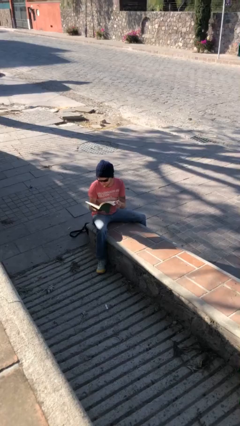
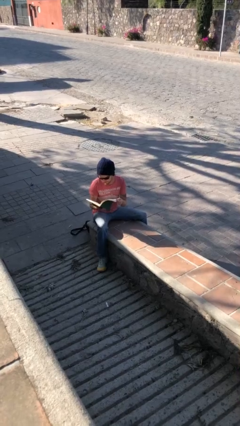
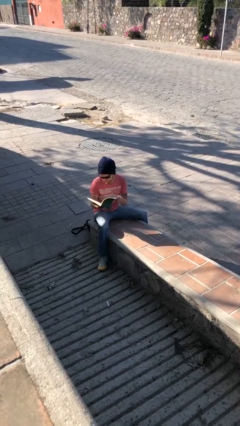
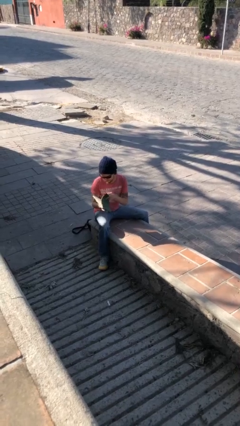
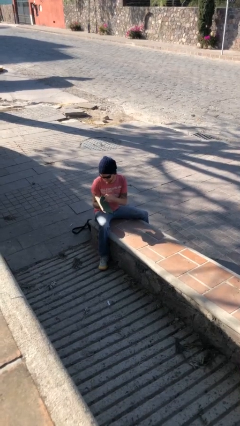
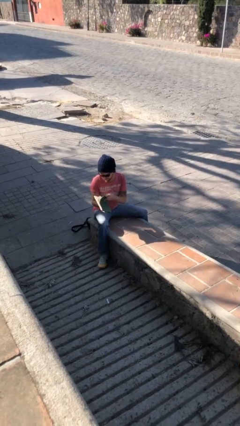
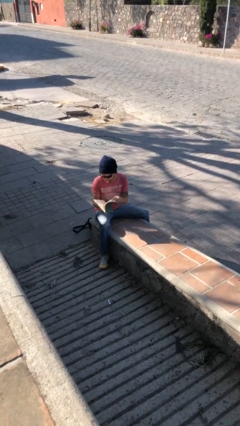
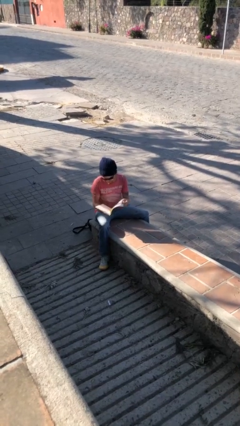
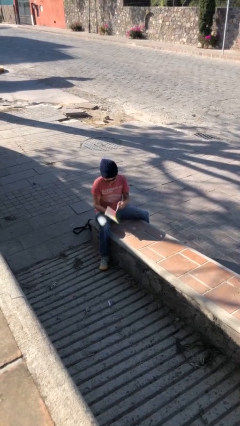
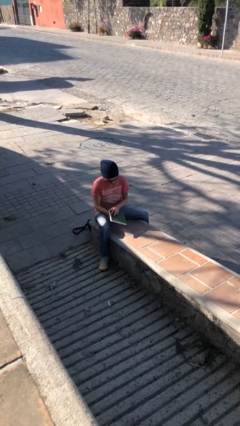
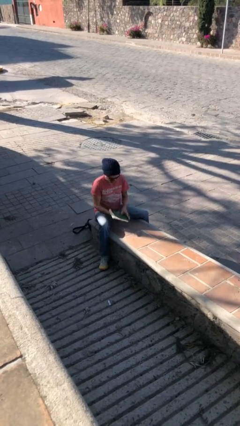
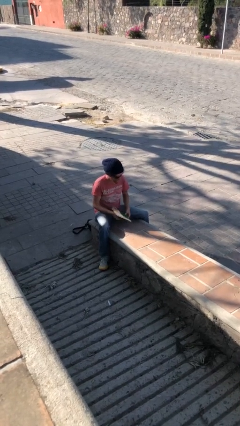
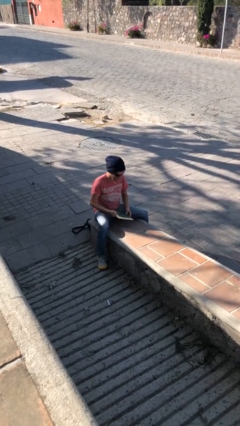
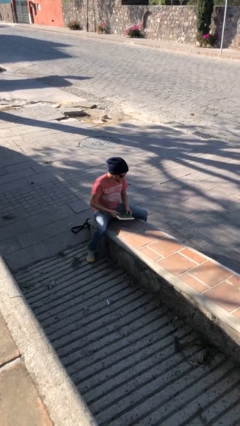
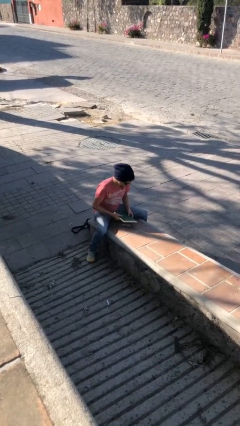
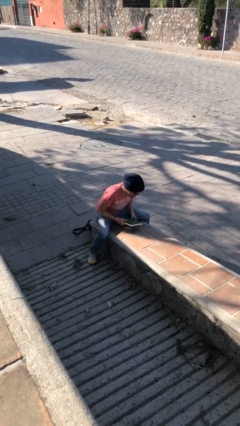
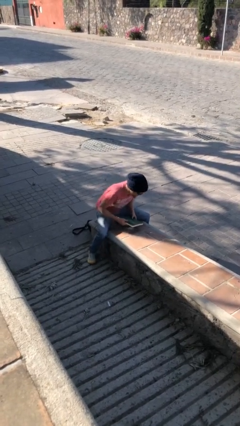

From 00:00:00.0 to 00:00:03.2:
person reads document

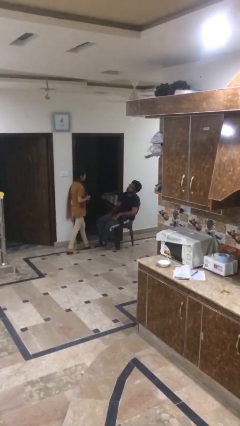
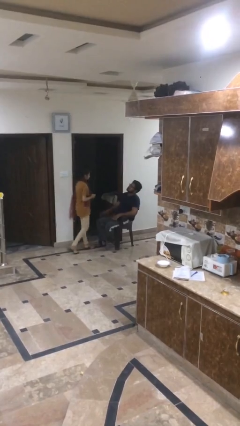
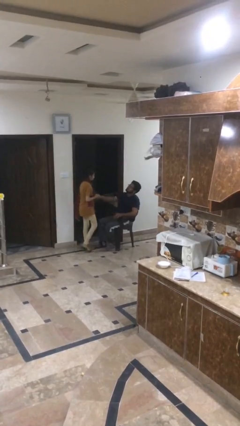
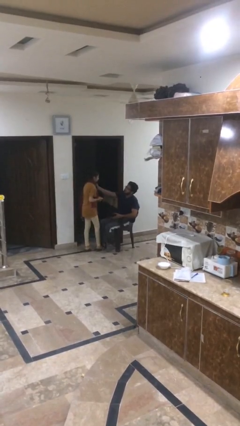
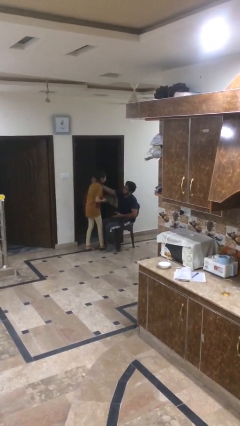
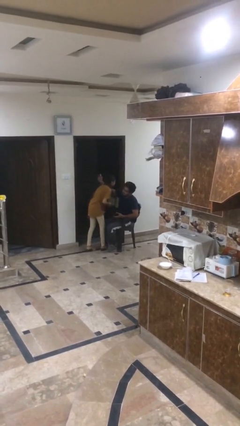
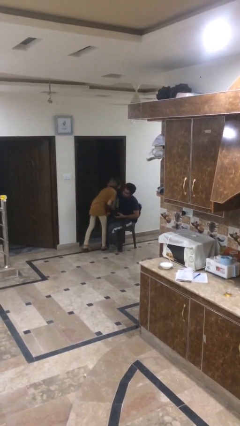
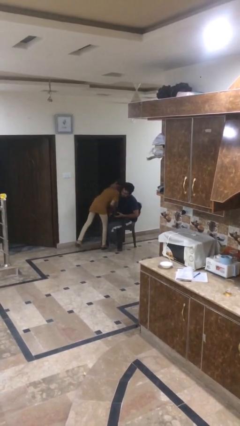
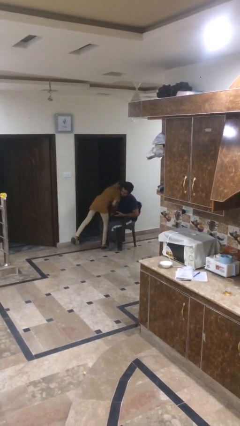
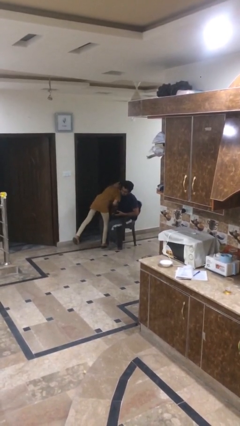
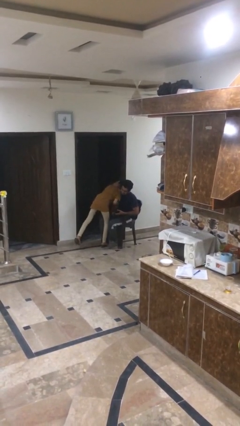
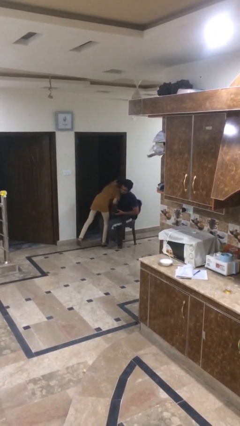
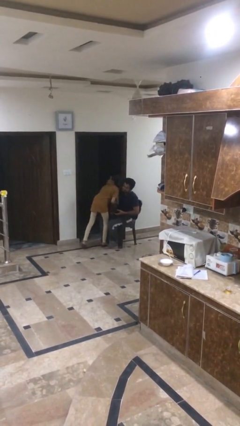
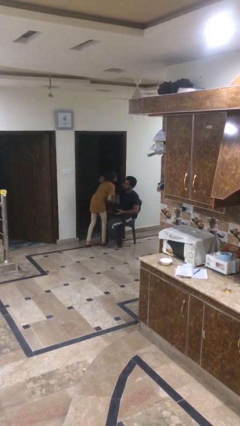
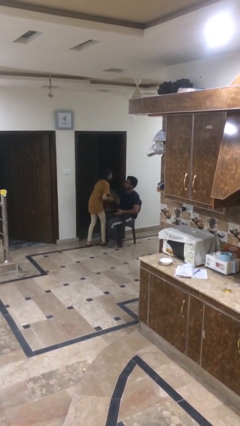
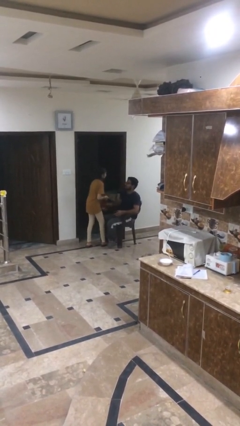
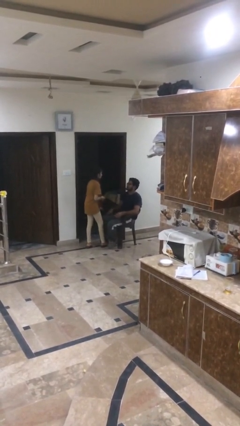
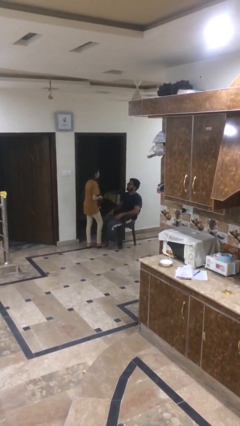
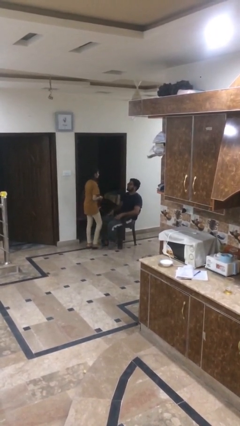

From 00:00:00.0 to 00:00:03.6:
person embraces person

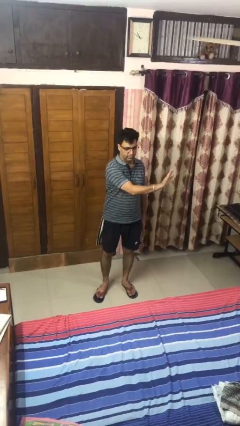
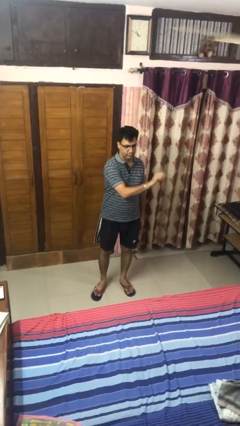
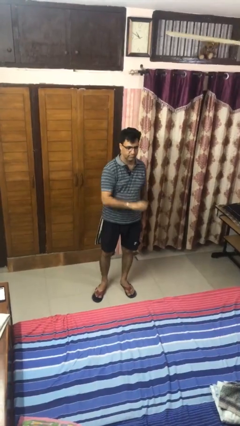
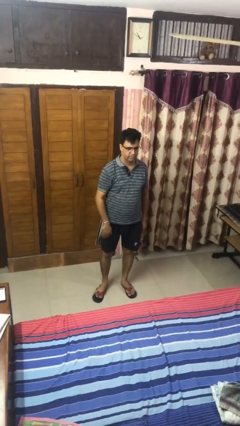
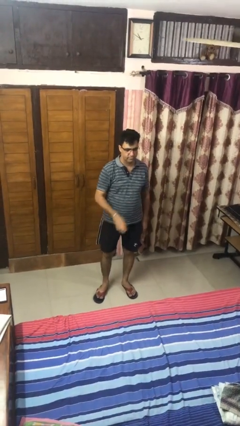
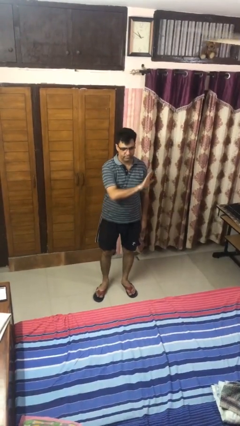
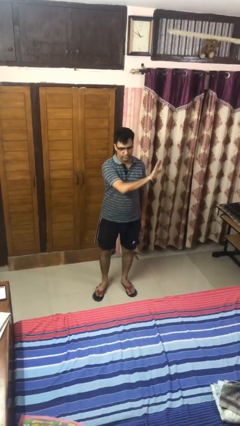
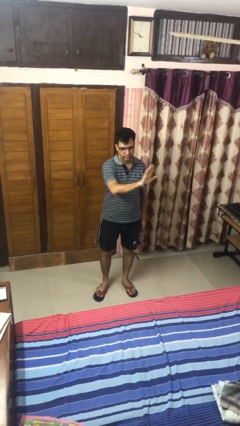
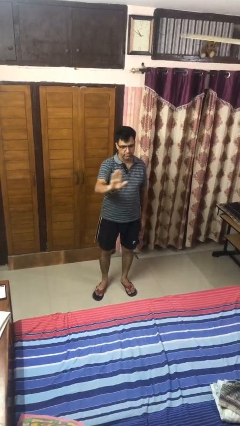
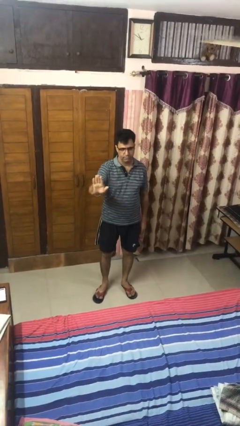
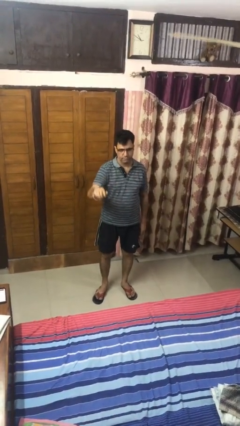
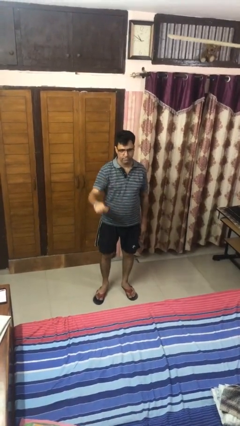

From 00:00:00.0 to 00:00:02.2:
person gestures swipe right

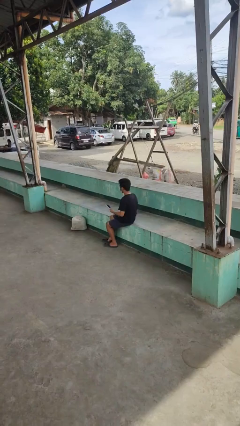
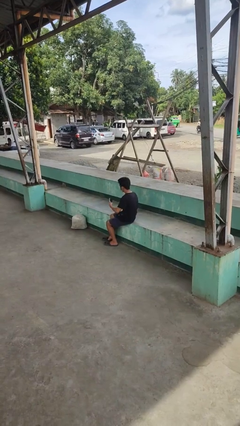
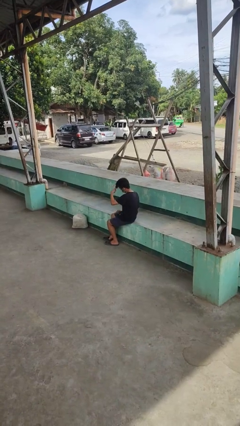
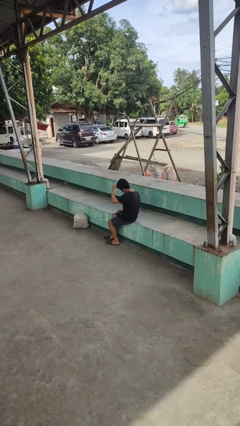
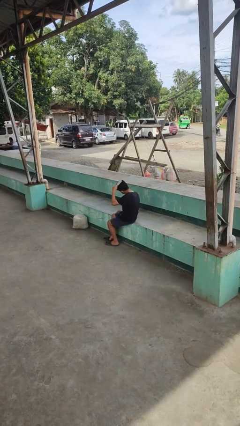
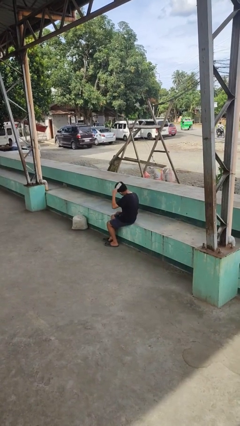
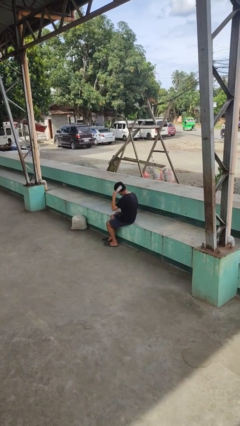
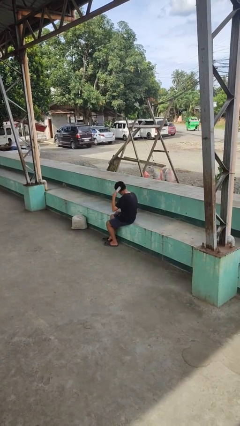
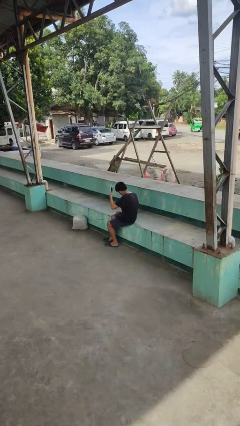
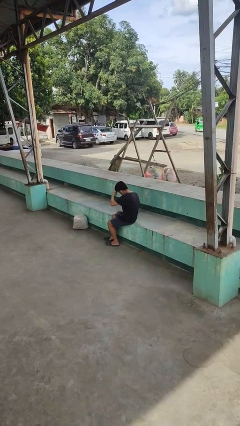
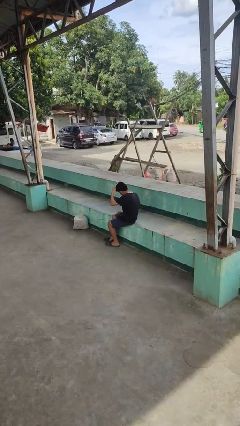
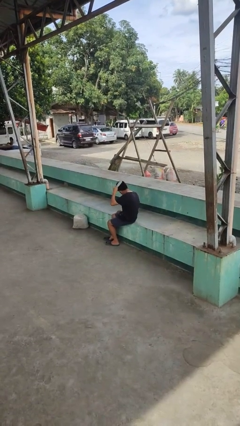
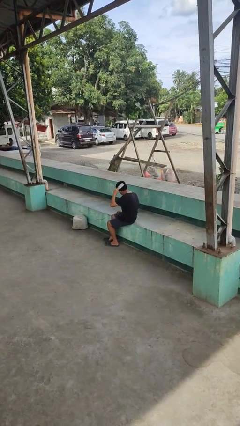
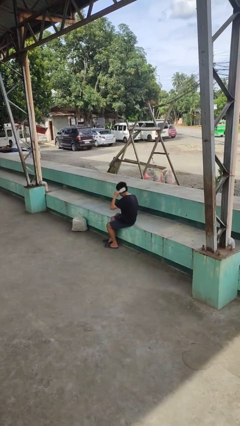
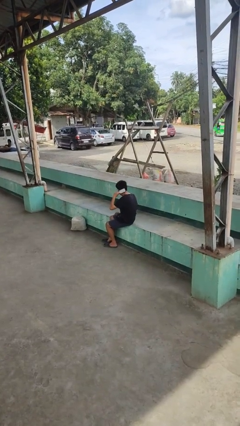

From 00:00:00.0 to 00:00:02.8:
person brushes hair

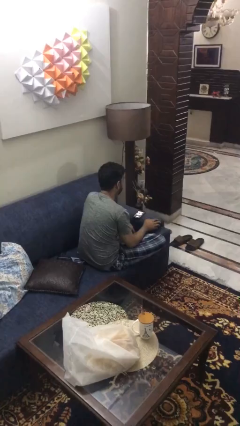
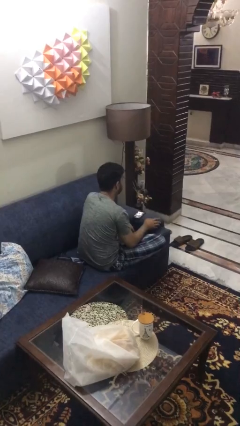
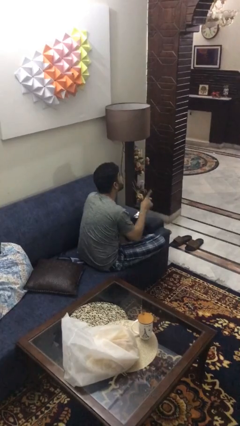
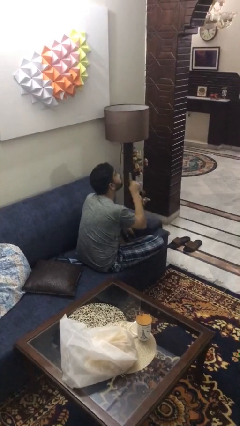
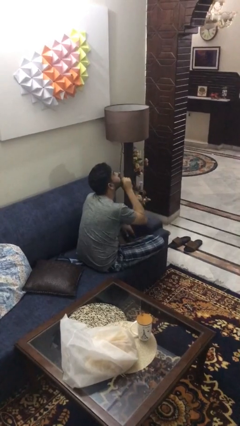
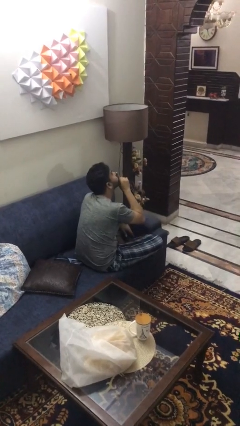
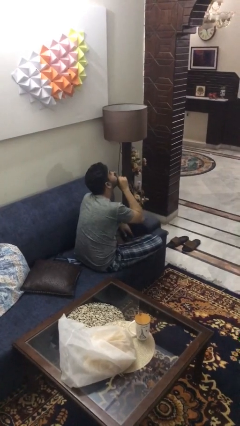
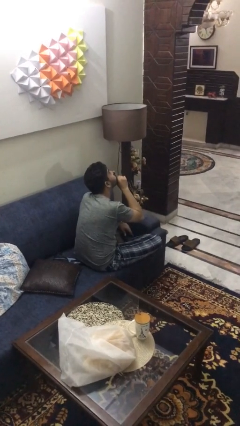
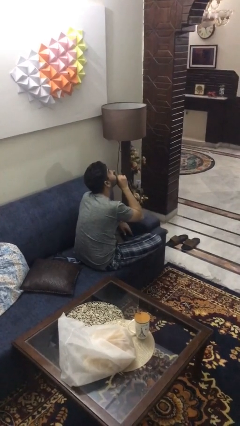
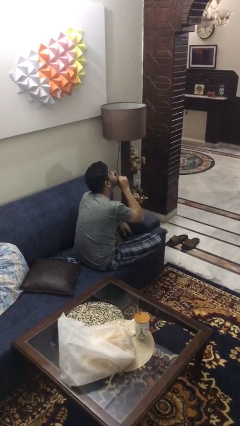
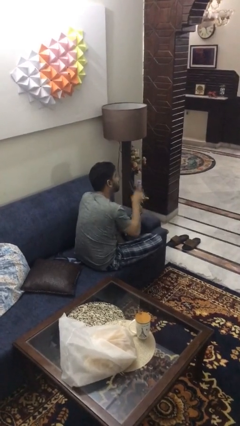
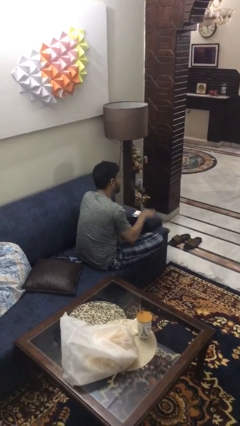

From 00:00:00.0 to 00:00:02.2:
person gestures be quiet

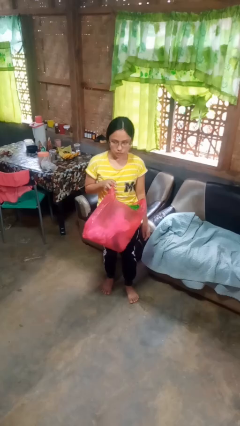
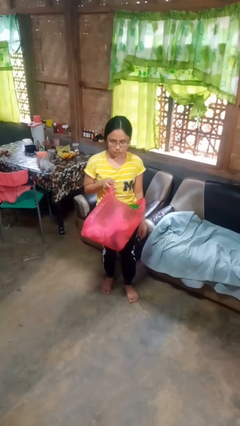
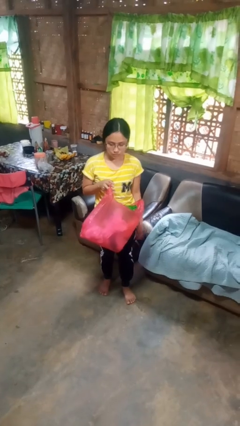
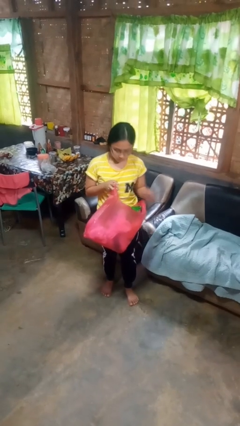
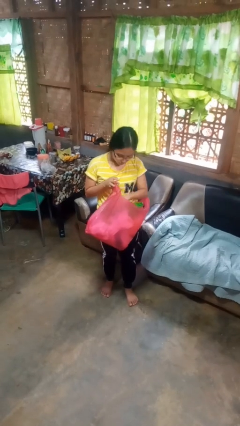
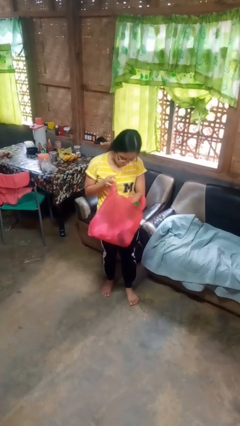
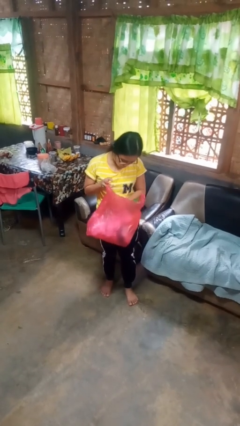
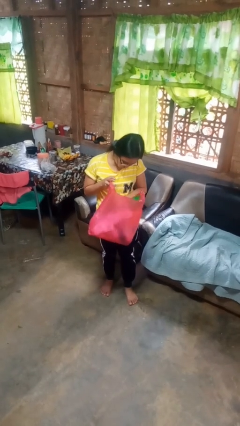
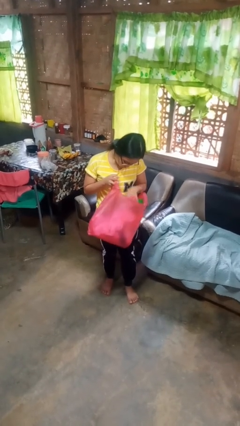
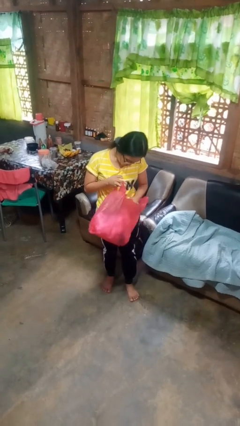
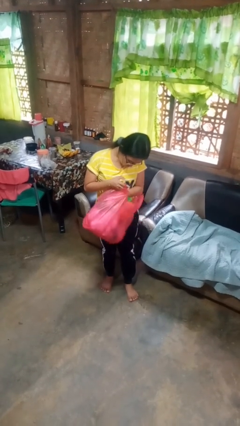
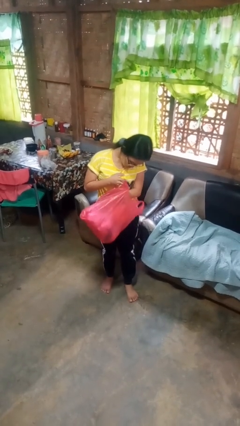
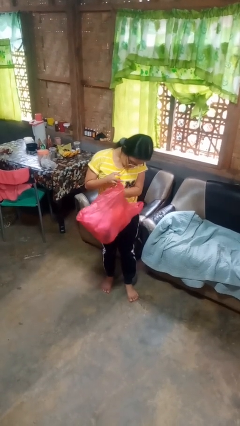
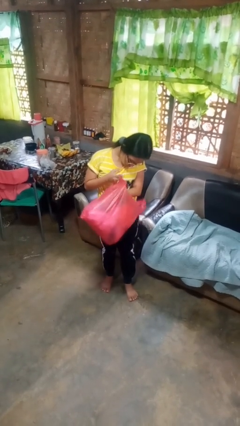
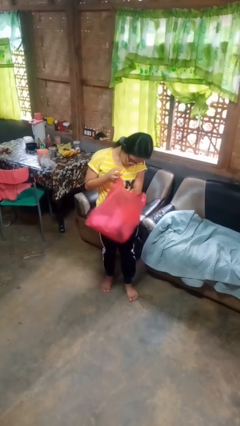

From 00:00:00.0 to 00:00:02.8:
person searches in bag

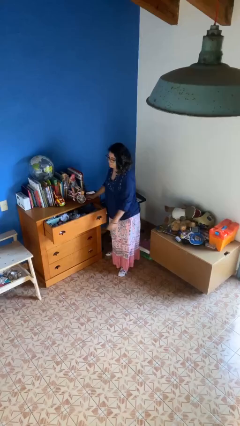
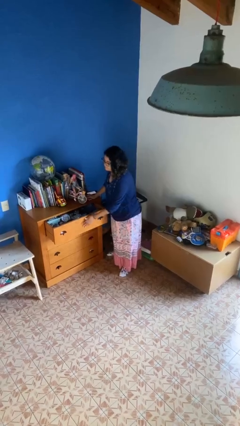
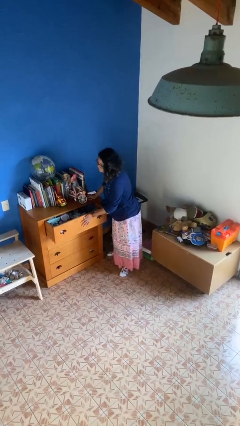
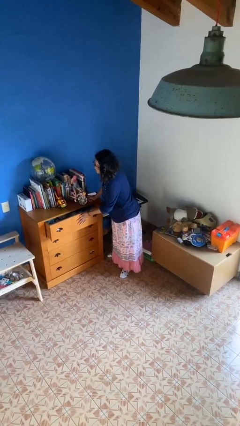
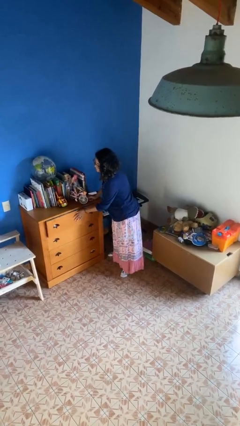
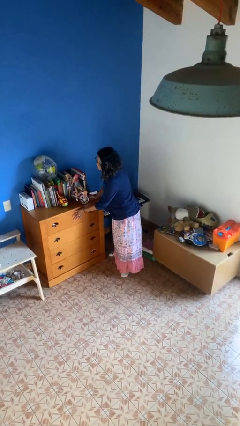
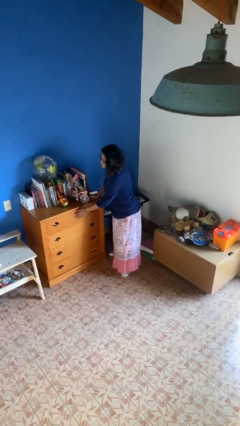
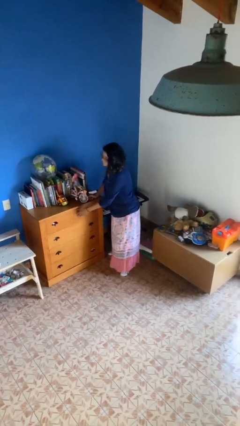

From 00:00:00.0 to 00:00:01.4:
person closes dresser drawer
